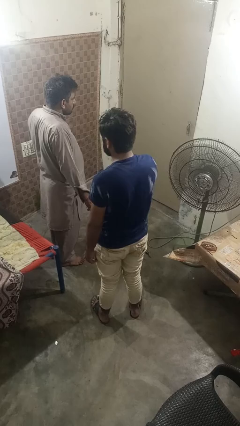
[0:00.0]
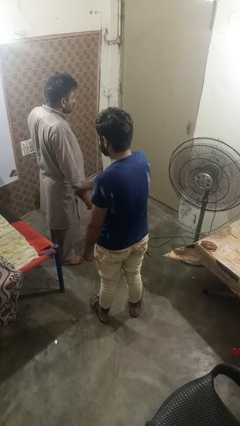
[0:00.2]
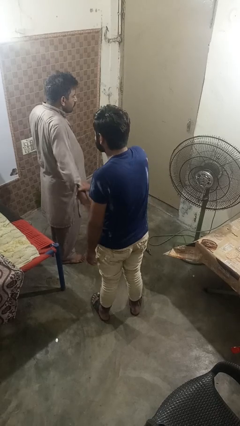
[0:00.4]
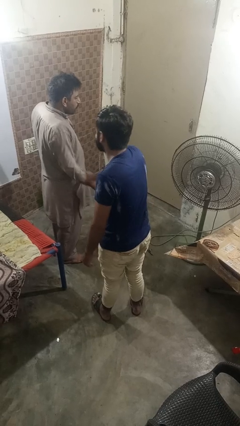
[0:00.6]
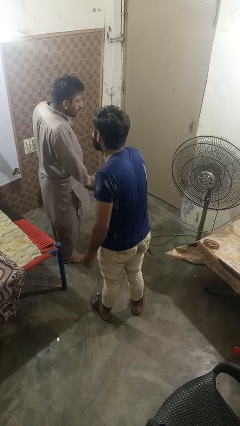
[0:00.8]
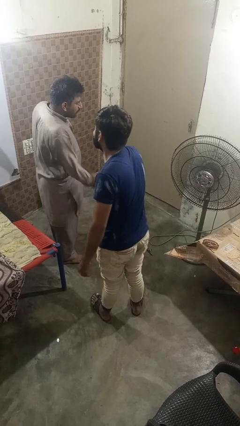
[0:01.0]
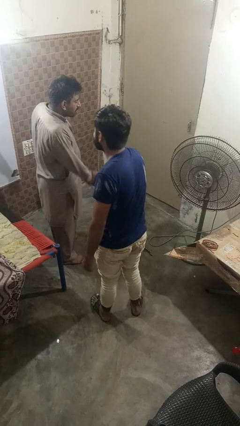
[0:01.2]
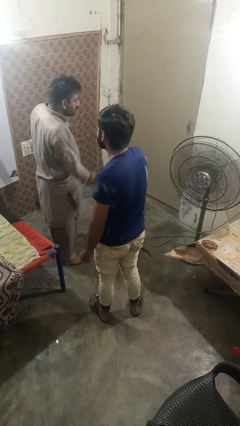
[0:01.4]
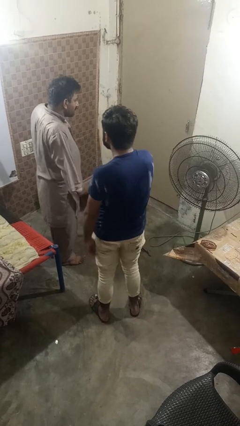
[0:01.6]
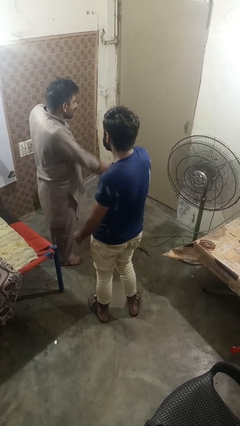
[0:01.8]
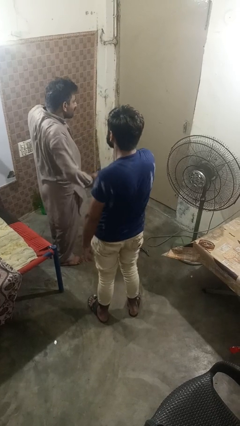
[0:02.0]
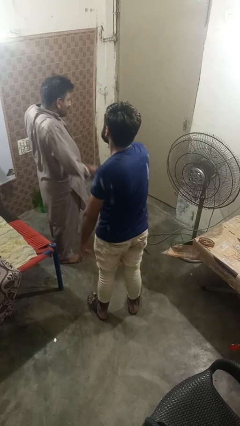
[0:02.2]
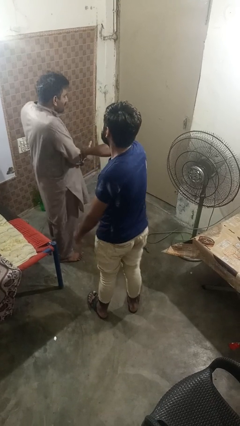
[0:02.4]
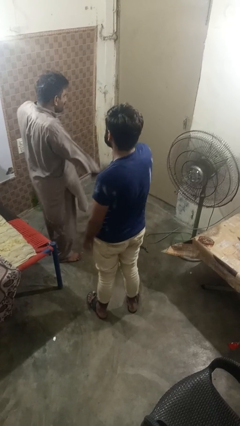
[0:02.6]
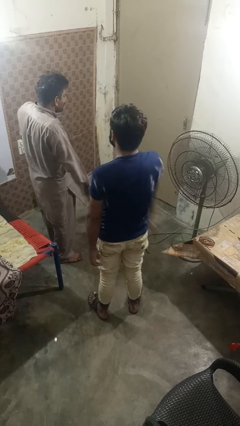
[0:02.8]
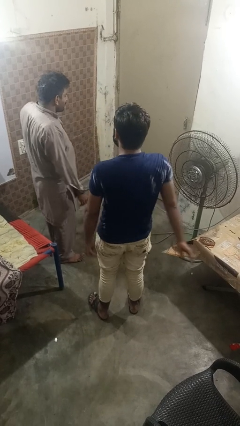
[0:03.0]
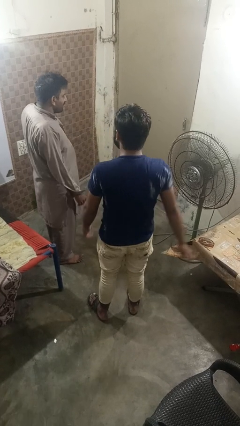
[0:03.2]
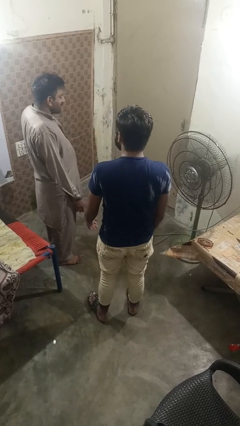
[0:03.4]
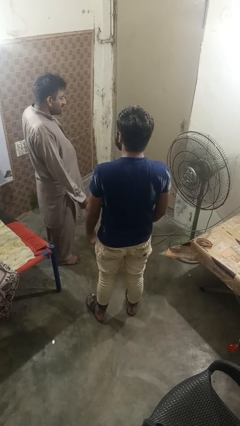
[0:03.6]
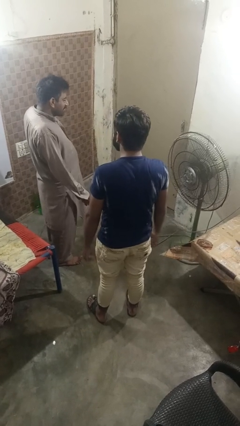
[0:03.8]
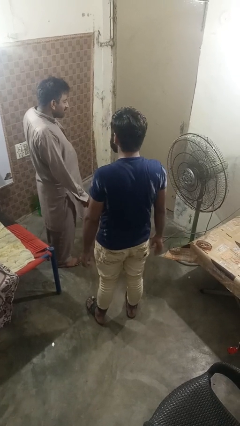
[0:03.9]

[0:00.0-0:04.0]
person grabs person by forearm

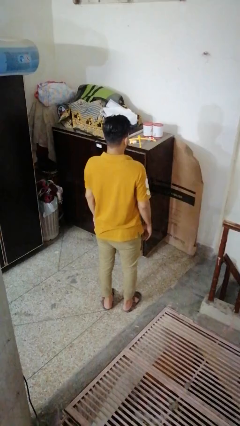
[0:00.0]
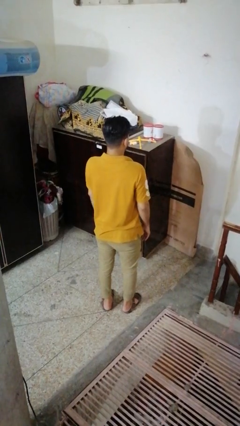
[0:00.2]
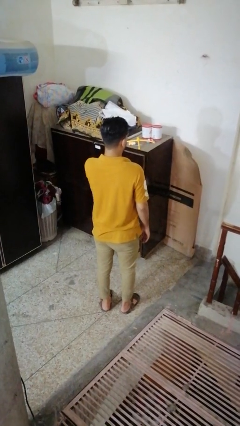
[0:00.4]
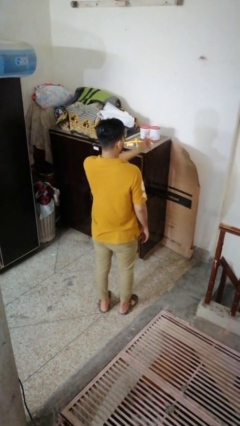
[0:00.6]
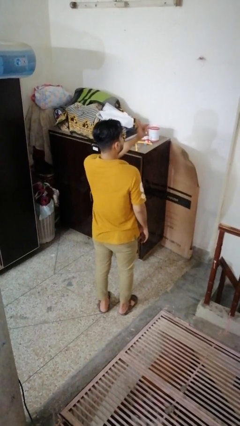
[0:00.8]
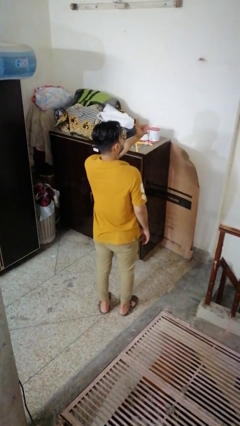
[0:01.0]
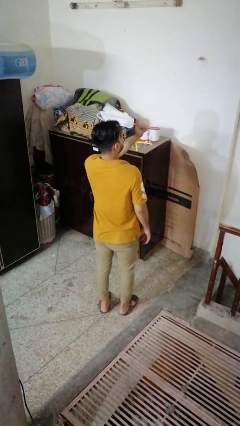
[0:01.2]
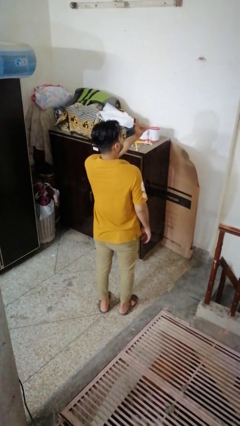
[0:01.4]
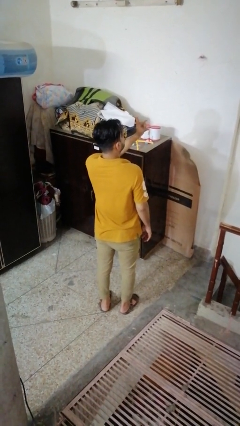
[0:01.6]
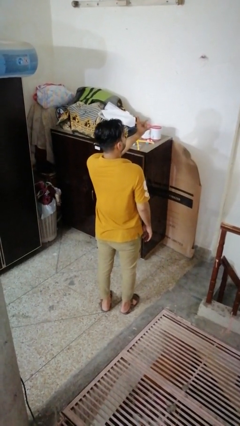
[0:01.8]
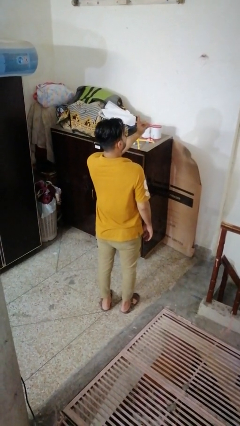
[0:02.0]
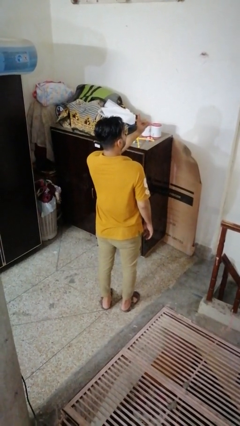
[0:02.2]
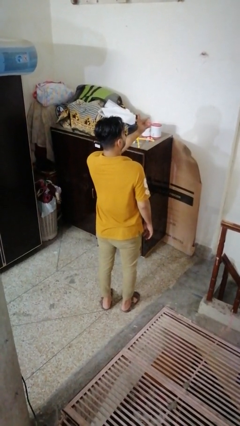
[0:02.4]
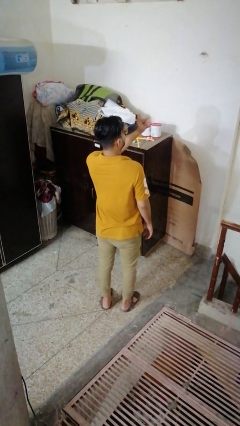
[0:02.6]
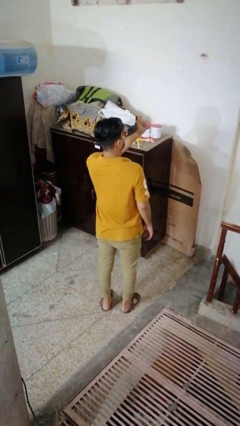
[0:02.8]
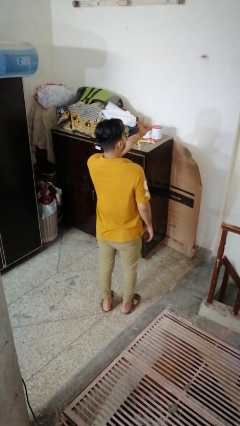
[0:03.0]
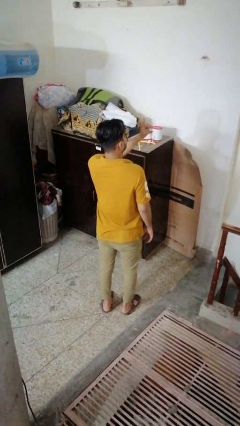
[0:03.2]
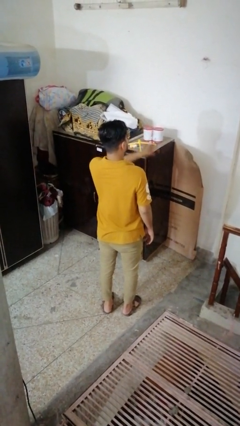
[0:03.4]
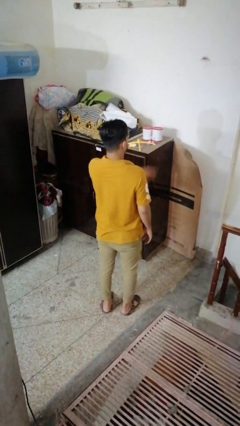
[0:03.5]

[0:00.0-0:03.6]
person snaps fingers

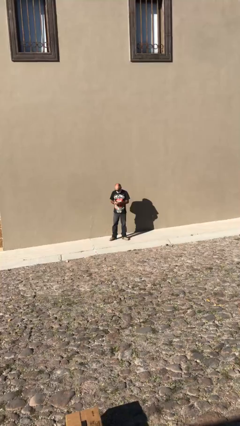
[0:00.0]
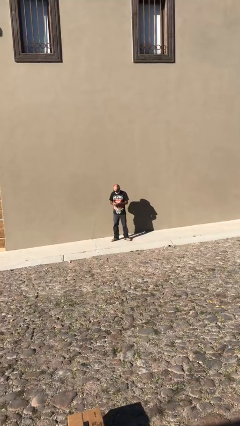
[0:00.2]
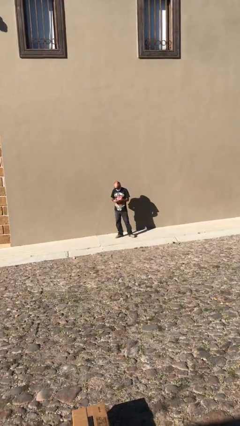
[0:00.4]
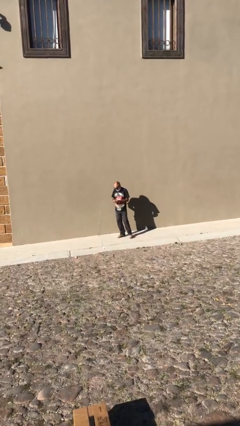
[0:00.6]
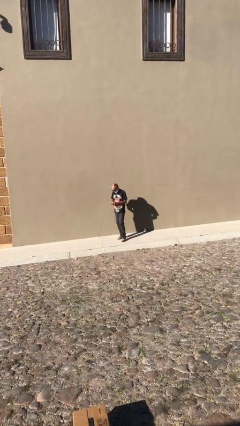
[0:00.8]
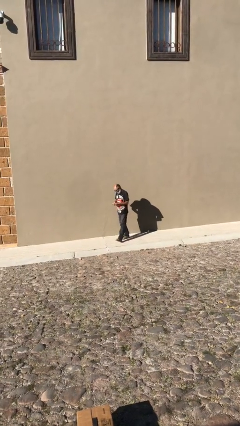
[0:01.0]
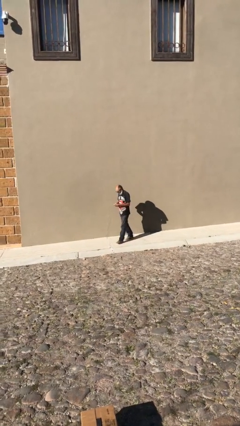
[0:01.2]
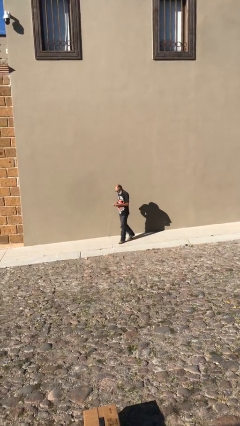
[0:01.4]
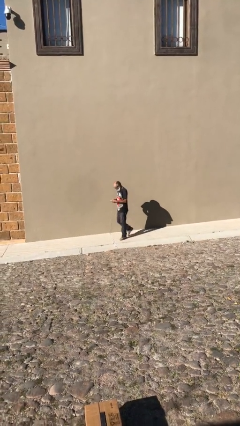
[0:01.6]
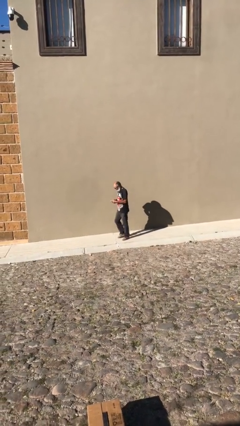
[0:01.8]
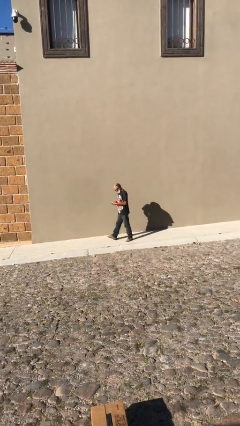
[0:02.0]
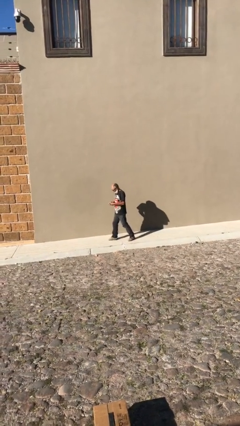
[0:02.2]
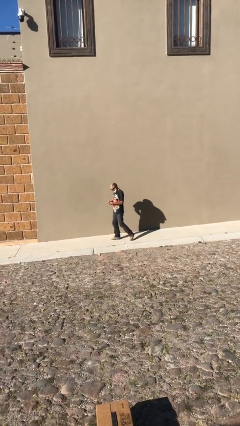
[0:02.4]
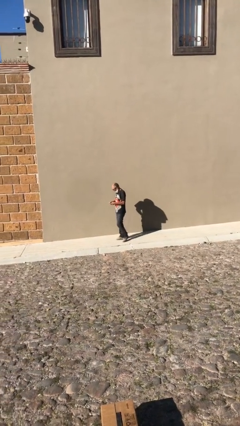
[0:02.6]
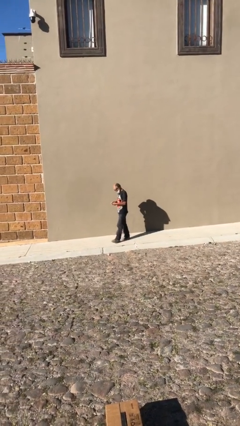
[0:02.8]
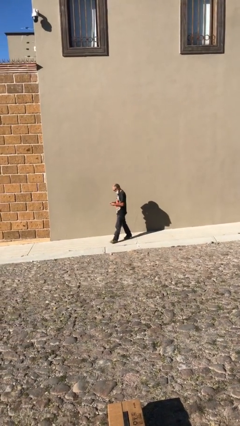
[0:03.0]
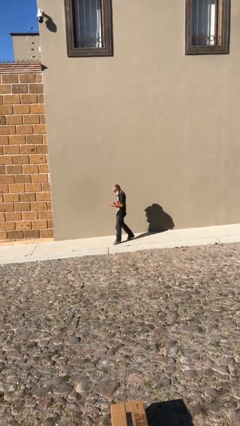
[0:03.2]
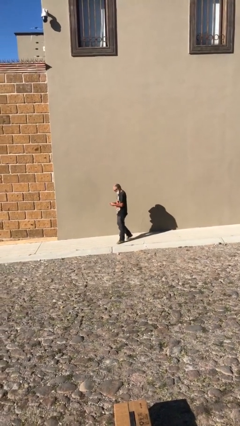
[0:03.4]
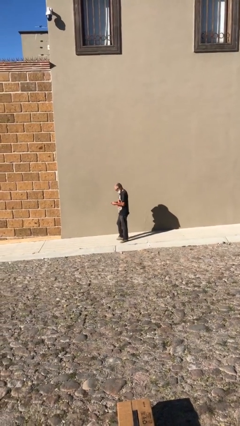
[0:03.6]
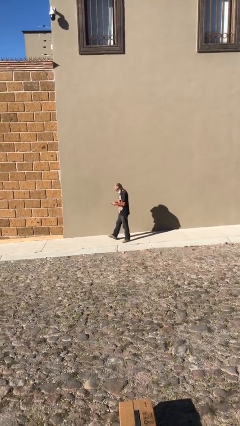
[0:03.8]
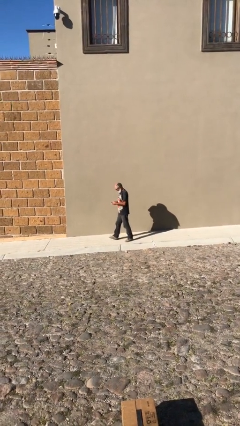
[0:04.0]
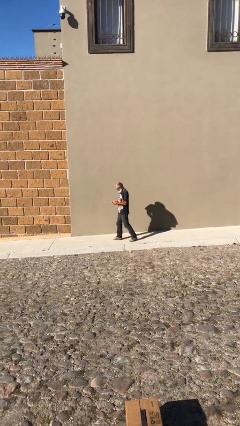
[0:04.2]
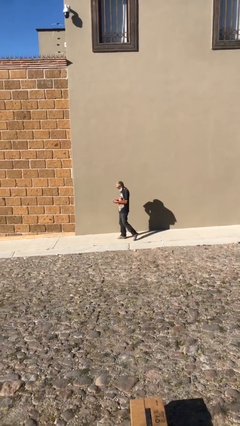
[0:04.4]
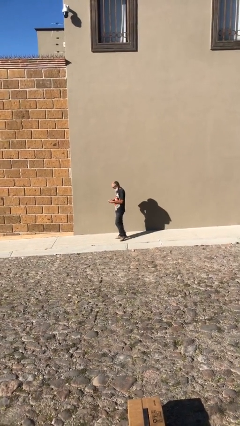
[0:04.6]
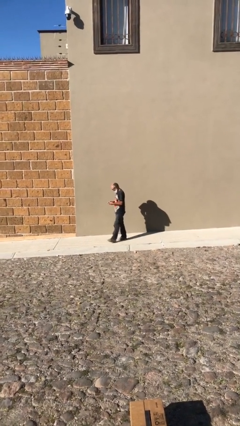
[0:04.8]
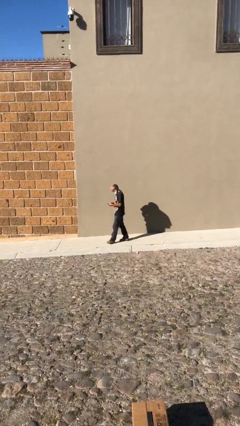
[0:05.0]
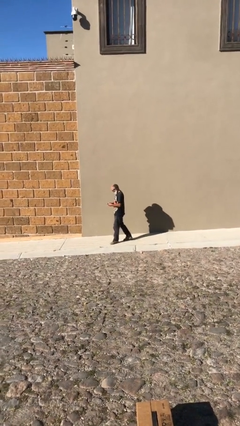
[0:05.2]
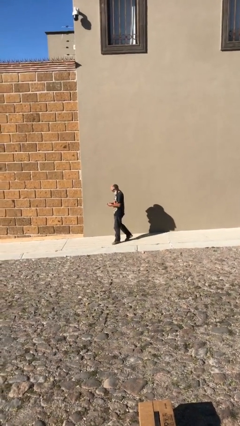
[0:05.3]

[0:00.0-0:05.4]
person texts on phone

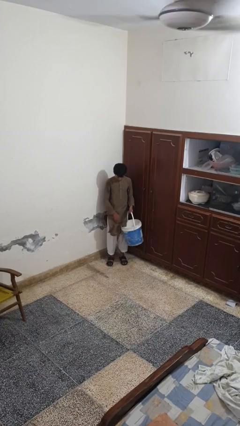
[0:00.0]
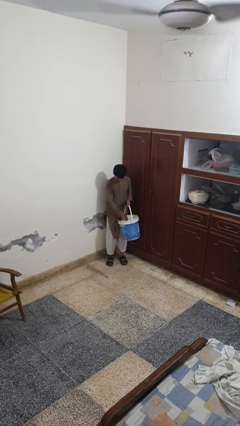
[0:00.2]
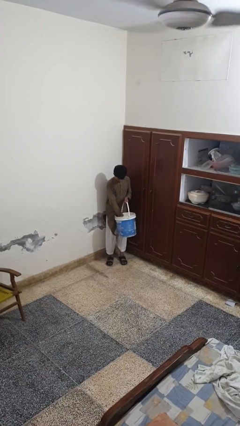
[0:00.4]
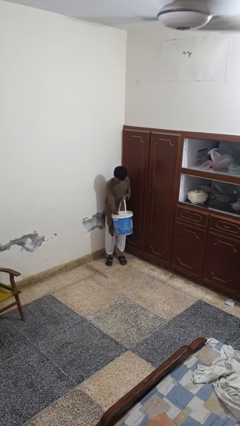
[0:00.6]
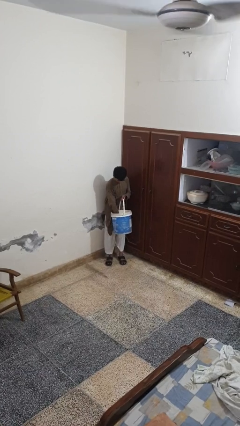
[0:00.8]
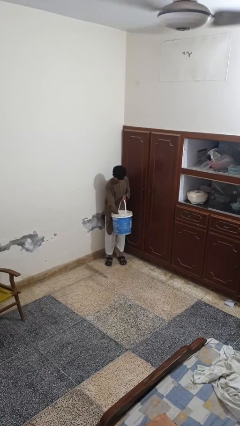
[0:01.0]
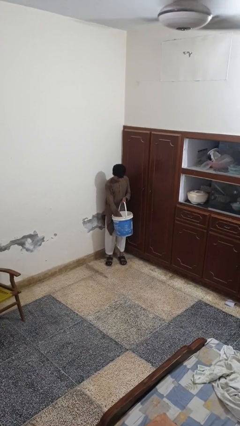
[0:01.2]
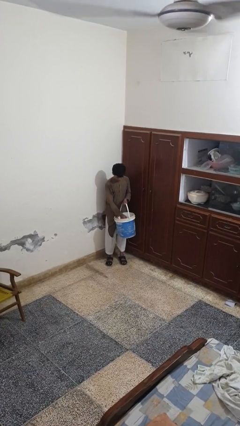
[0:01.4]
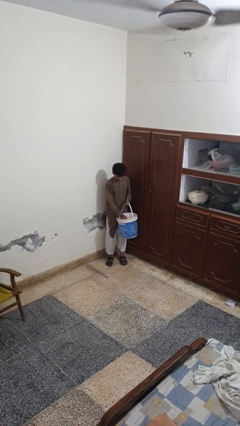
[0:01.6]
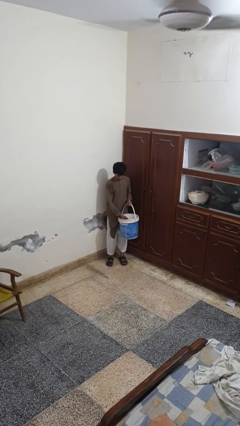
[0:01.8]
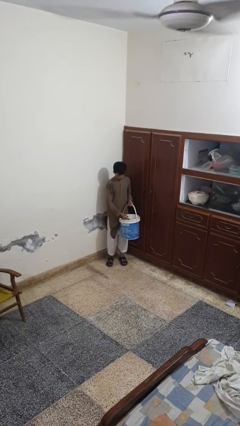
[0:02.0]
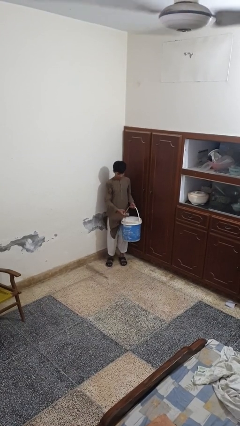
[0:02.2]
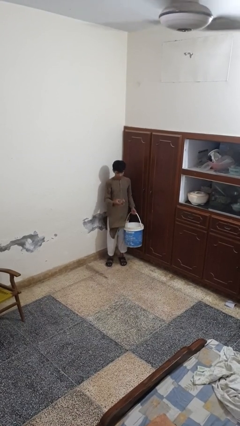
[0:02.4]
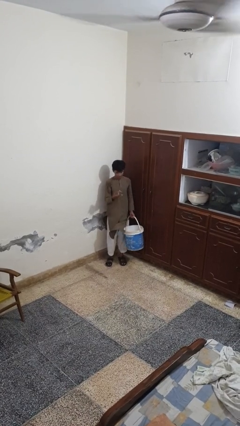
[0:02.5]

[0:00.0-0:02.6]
person takes object from basket

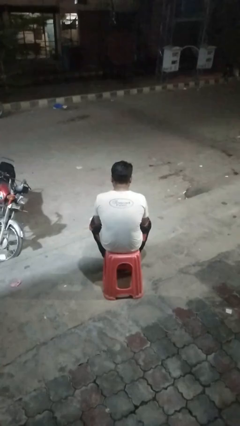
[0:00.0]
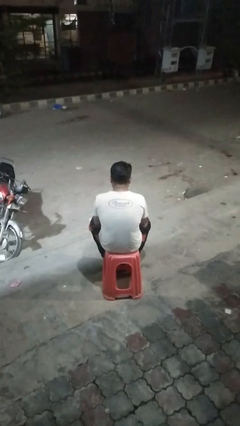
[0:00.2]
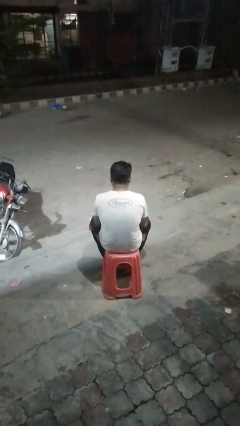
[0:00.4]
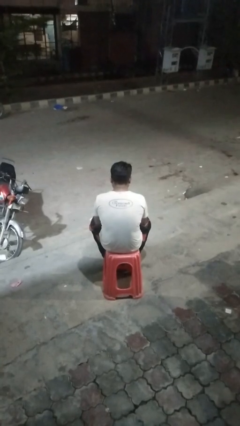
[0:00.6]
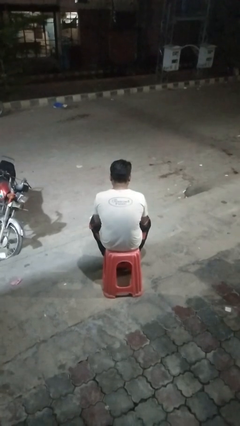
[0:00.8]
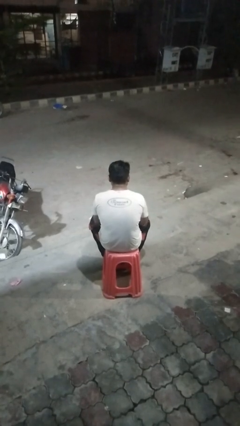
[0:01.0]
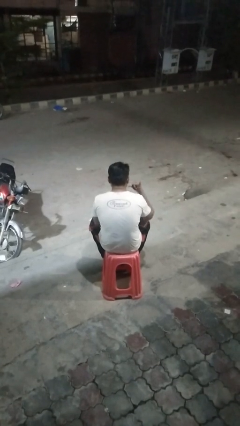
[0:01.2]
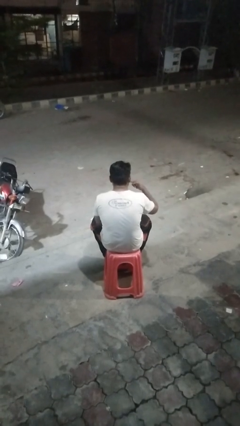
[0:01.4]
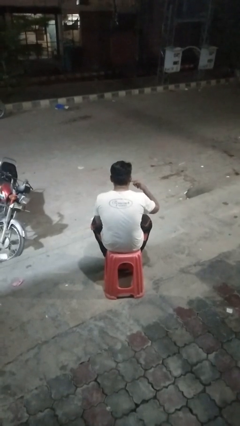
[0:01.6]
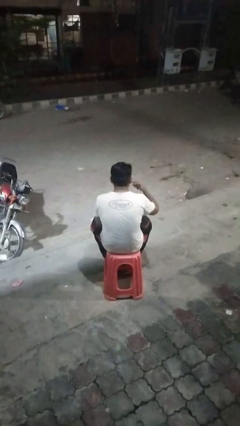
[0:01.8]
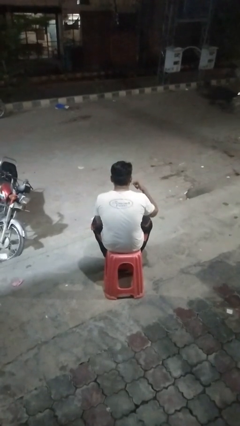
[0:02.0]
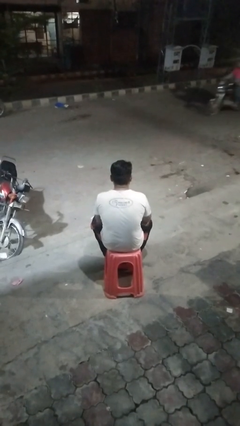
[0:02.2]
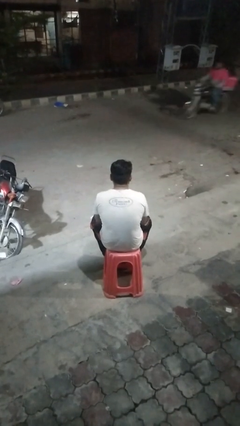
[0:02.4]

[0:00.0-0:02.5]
person gestures call me
